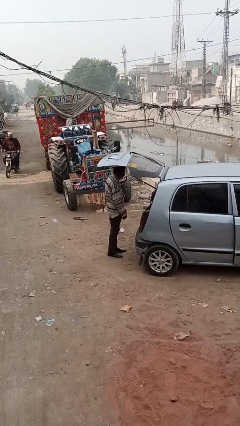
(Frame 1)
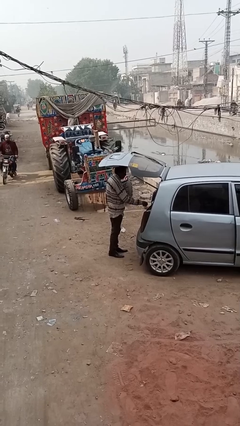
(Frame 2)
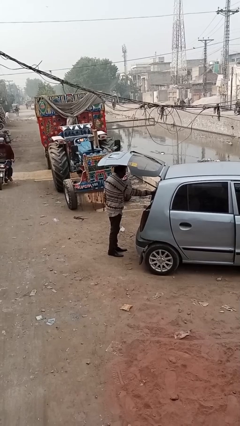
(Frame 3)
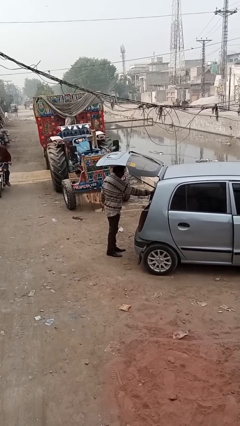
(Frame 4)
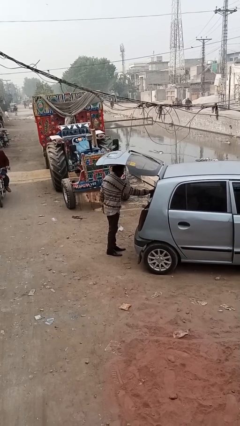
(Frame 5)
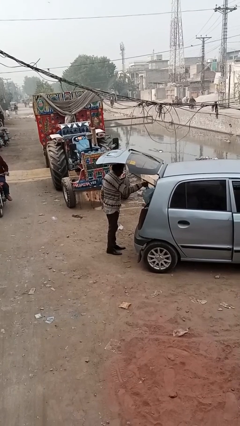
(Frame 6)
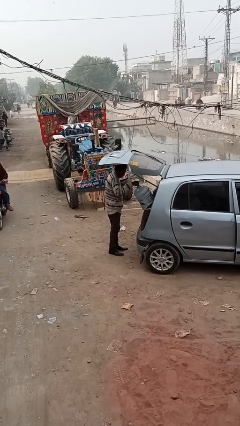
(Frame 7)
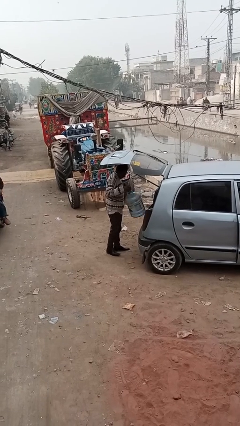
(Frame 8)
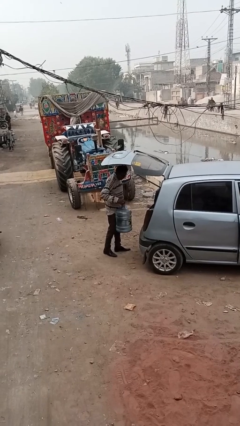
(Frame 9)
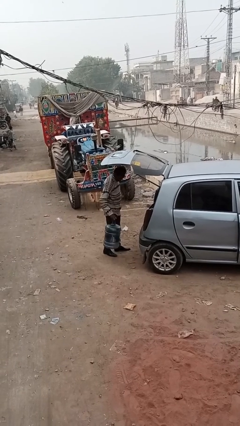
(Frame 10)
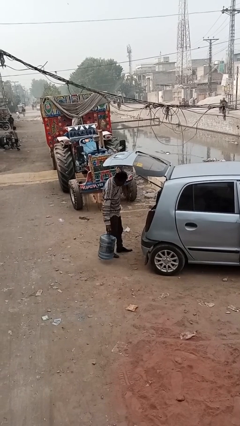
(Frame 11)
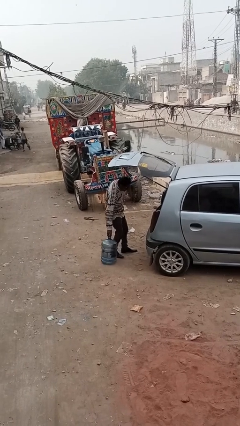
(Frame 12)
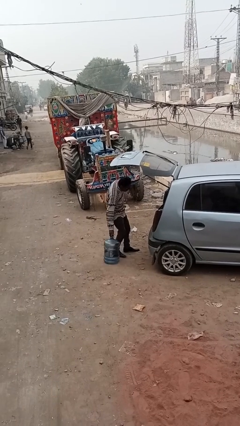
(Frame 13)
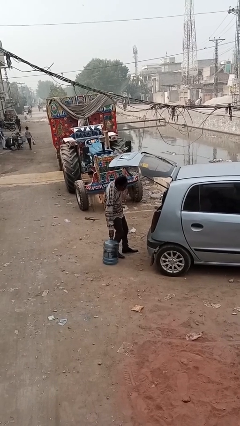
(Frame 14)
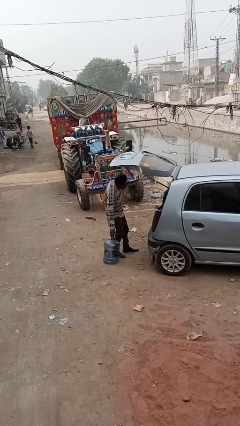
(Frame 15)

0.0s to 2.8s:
person unloads car

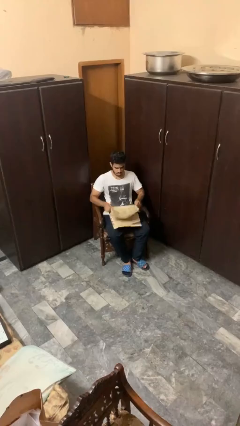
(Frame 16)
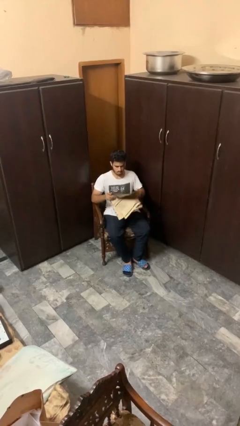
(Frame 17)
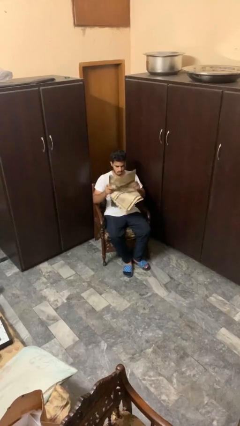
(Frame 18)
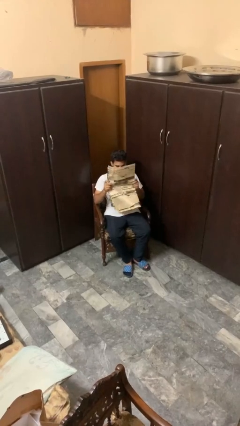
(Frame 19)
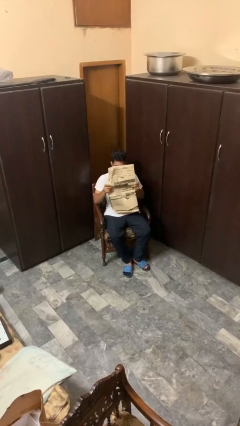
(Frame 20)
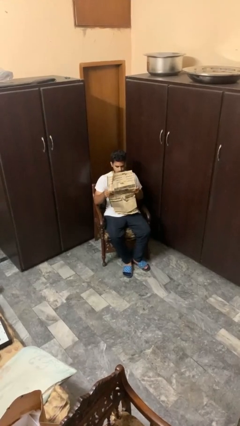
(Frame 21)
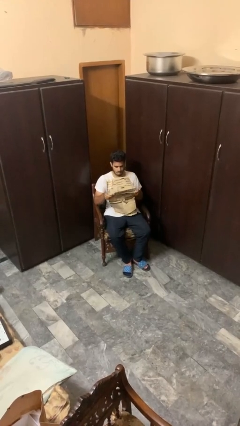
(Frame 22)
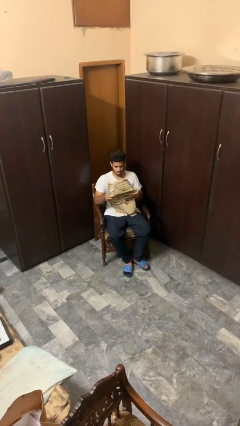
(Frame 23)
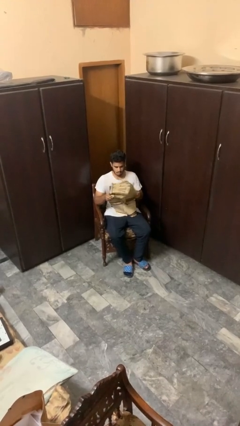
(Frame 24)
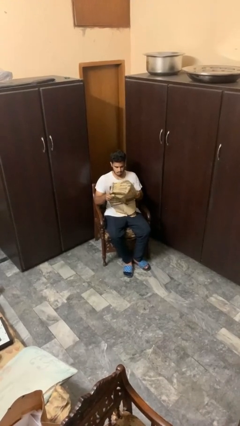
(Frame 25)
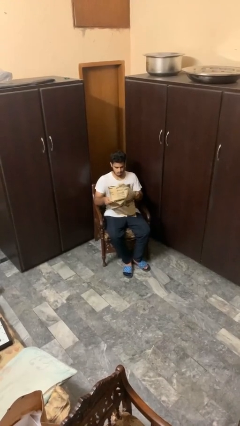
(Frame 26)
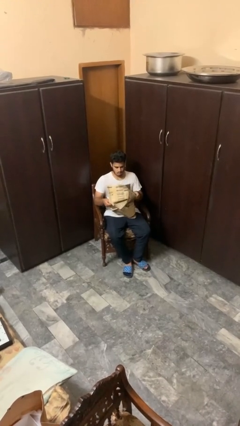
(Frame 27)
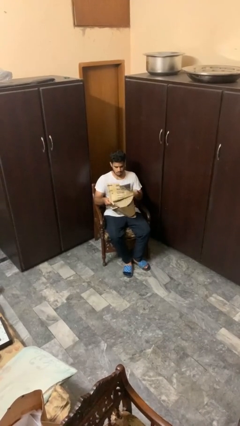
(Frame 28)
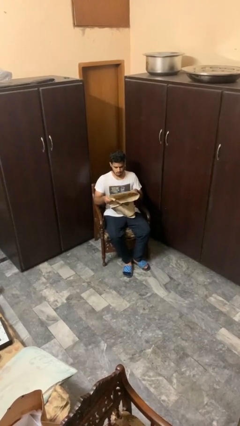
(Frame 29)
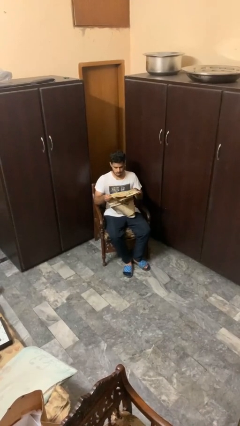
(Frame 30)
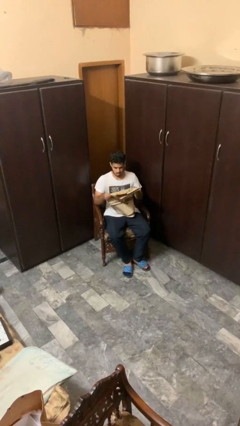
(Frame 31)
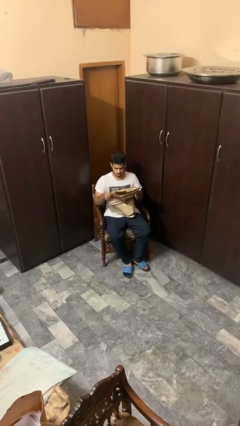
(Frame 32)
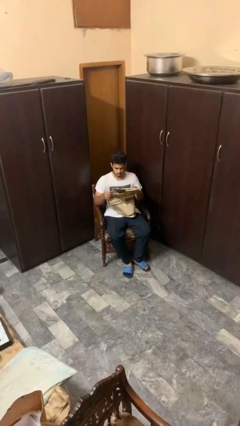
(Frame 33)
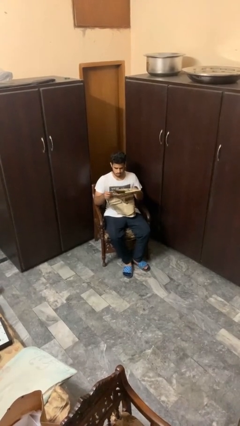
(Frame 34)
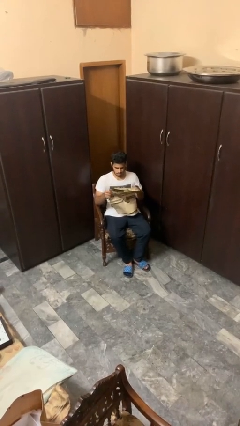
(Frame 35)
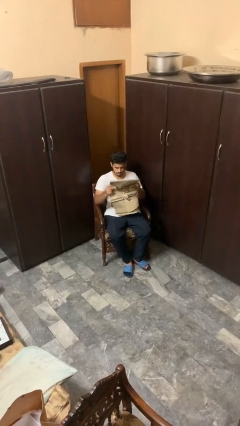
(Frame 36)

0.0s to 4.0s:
person reads newspaper

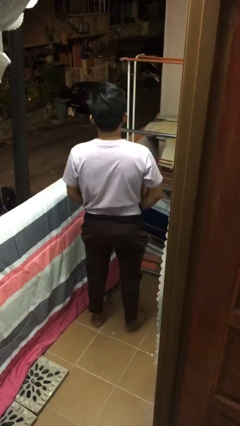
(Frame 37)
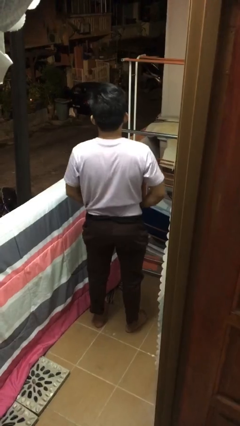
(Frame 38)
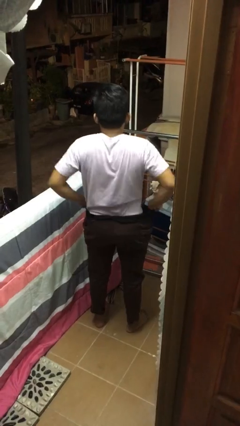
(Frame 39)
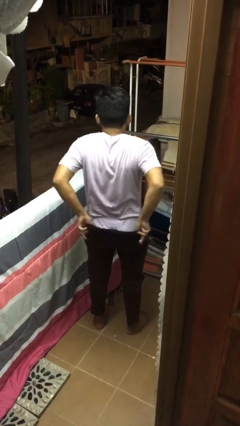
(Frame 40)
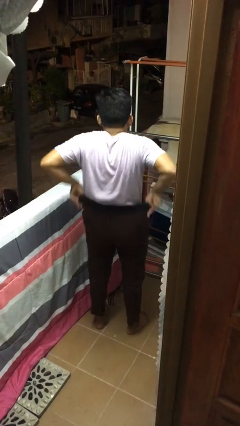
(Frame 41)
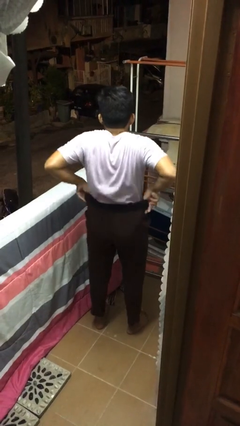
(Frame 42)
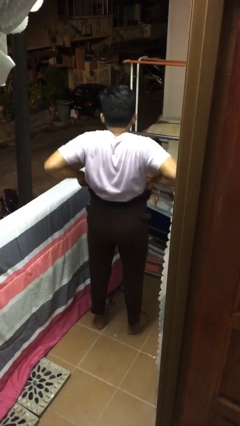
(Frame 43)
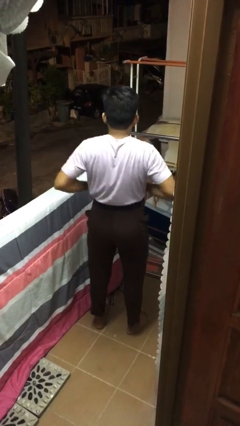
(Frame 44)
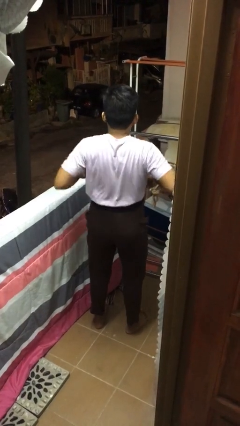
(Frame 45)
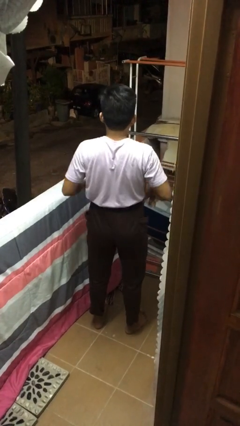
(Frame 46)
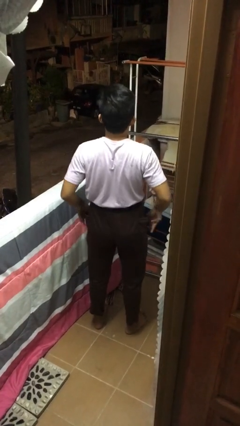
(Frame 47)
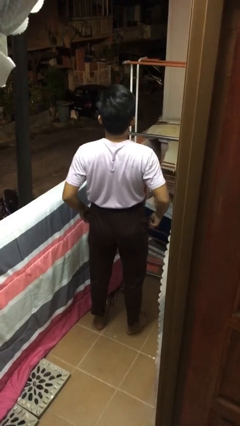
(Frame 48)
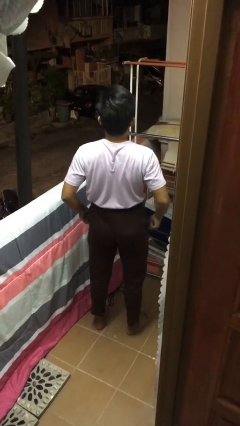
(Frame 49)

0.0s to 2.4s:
person hikes up pants

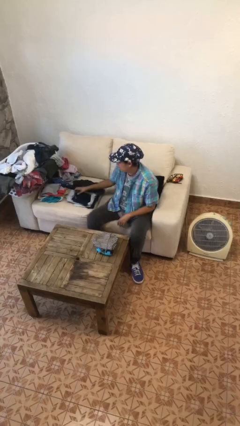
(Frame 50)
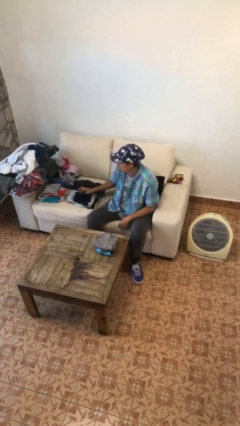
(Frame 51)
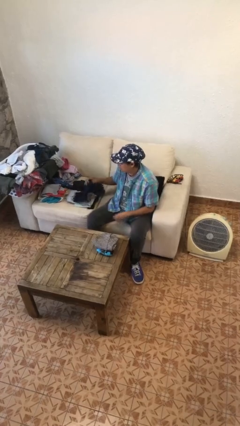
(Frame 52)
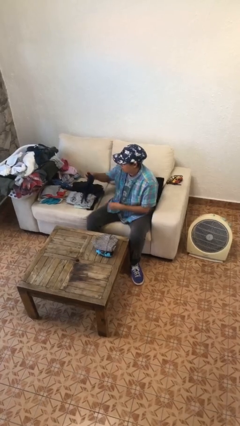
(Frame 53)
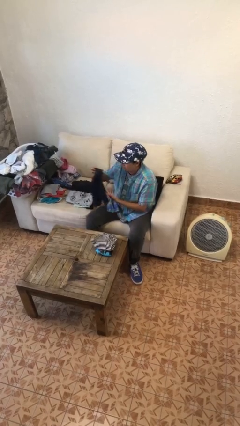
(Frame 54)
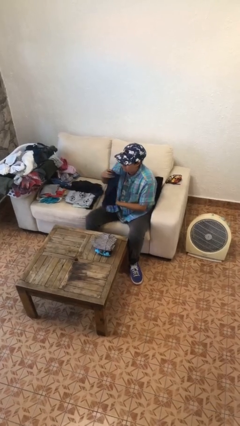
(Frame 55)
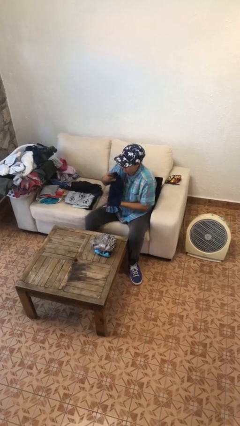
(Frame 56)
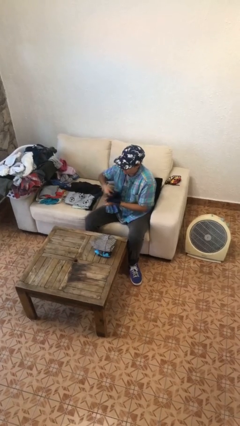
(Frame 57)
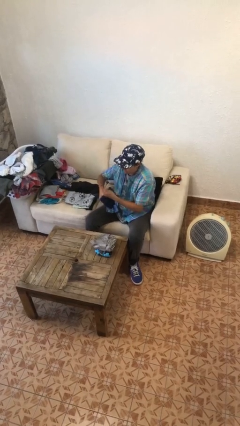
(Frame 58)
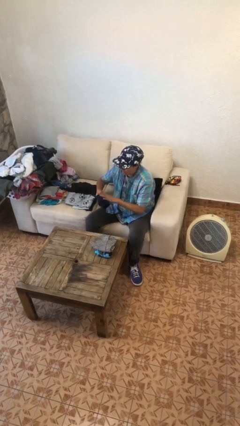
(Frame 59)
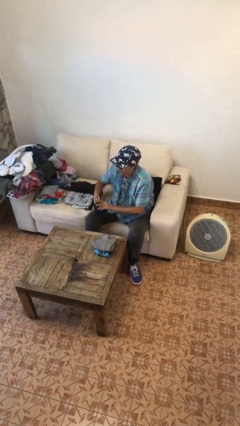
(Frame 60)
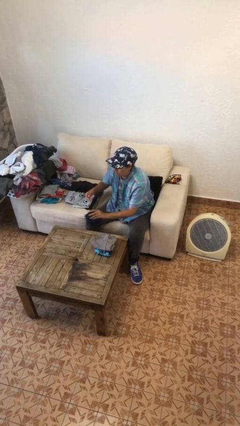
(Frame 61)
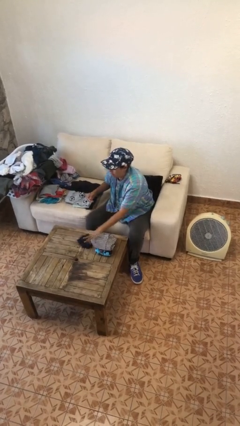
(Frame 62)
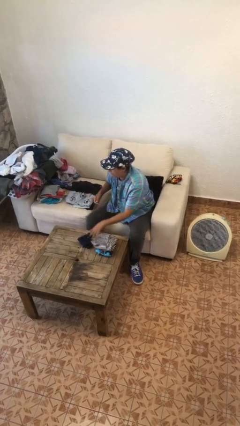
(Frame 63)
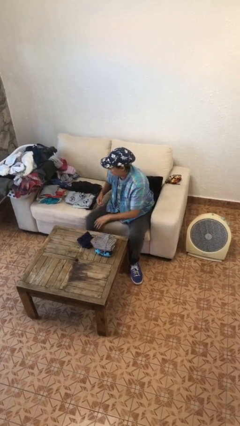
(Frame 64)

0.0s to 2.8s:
person folds pants

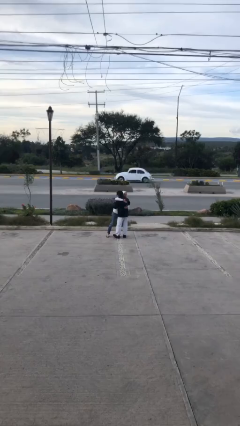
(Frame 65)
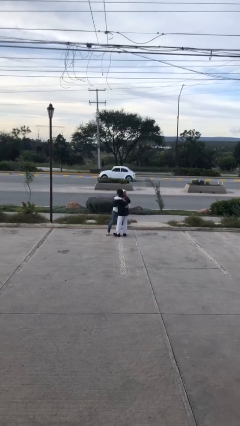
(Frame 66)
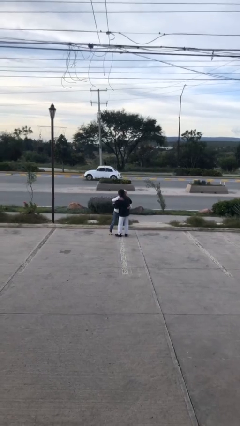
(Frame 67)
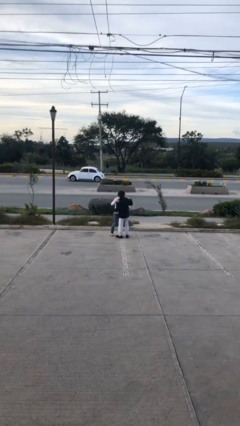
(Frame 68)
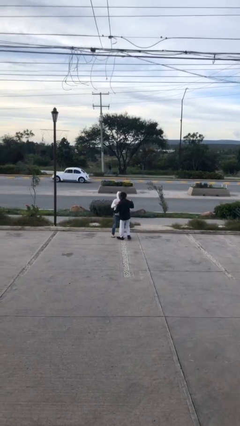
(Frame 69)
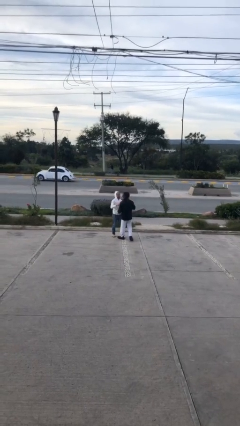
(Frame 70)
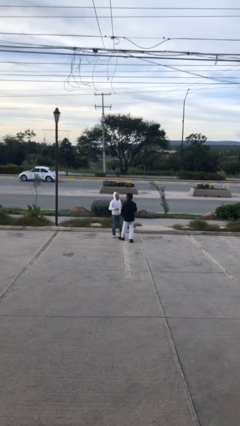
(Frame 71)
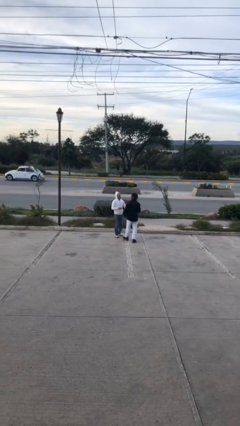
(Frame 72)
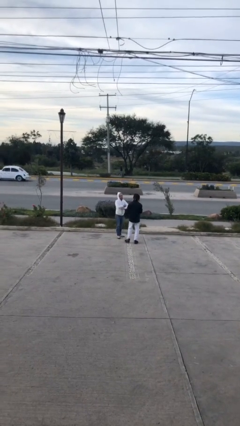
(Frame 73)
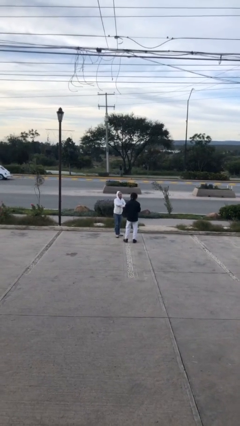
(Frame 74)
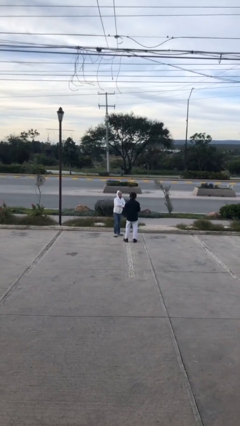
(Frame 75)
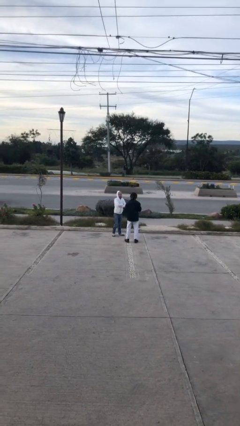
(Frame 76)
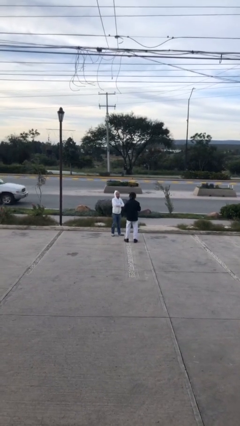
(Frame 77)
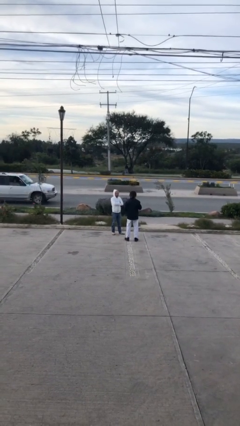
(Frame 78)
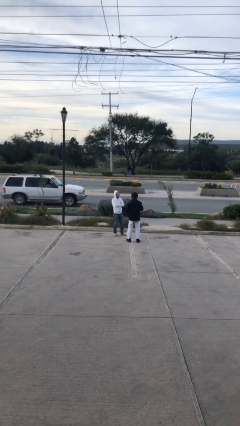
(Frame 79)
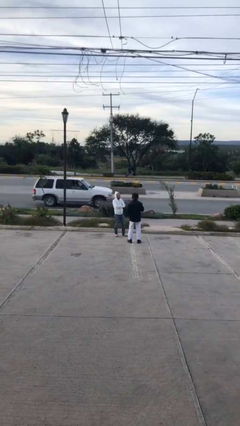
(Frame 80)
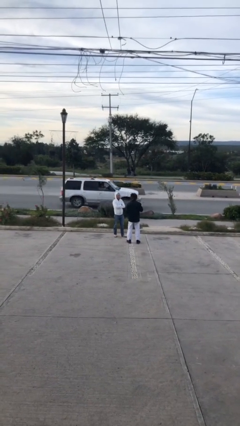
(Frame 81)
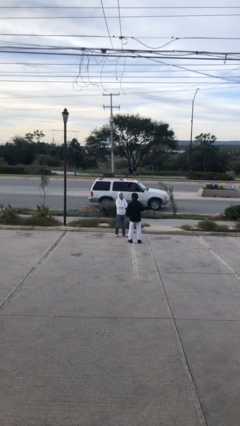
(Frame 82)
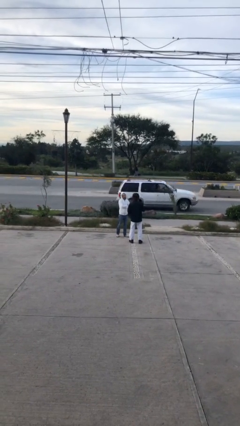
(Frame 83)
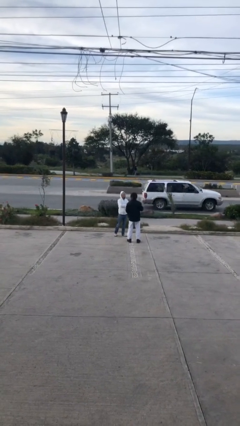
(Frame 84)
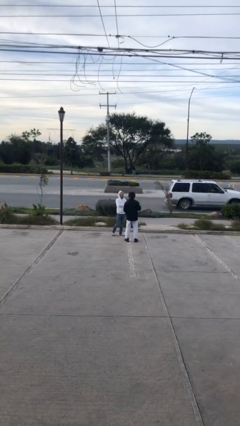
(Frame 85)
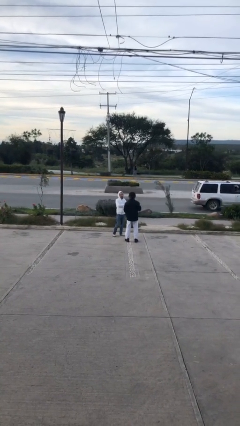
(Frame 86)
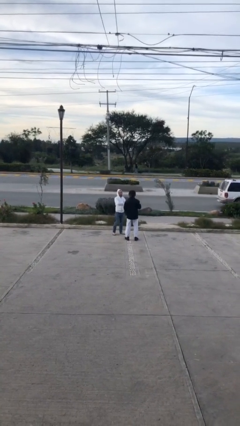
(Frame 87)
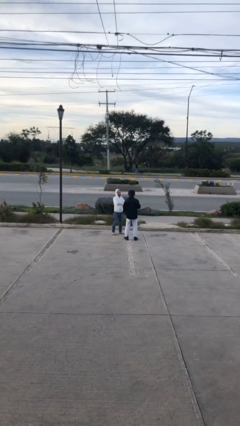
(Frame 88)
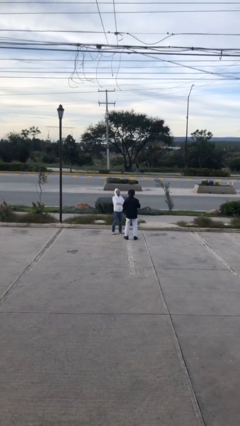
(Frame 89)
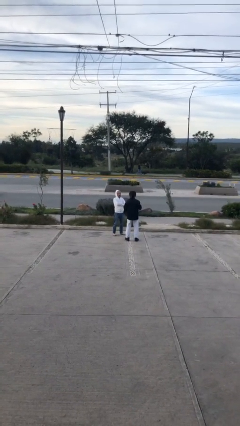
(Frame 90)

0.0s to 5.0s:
person talks to person

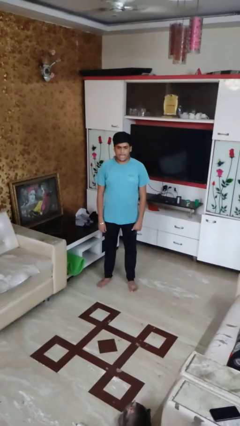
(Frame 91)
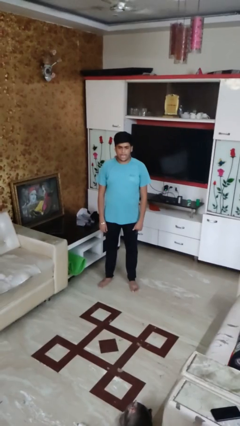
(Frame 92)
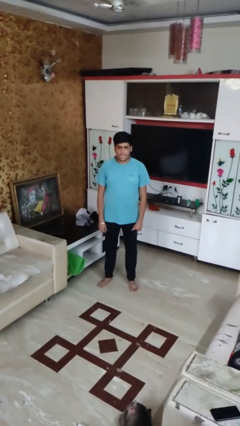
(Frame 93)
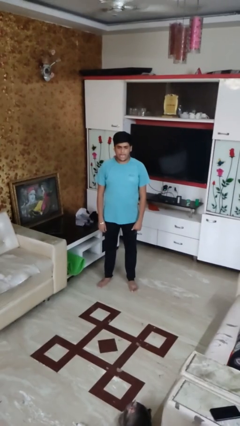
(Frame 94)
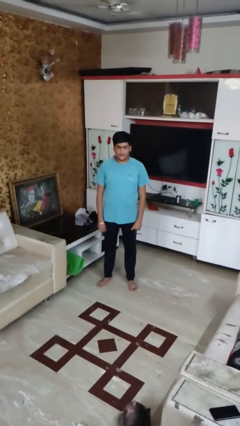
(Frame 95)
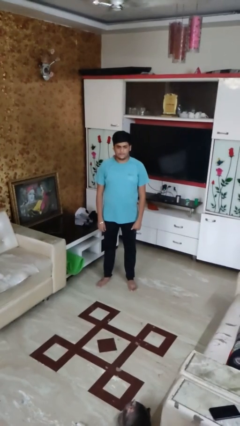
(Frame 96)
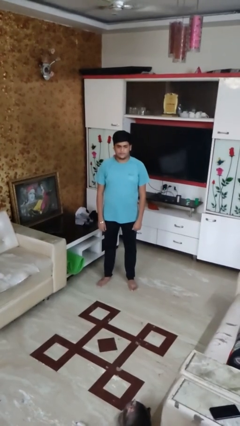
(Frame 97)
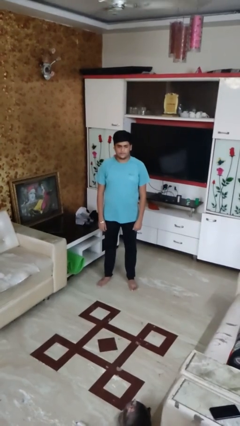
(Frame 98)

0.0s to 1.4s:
person sticks out tongue
